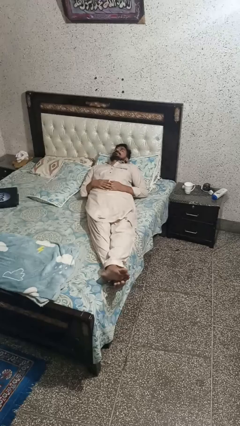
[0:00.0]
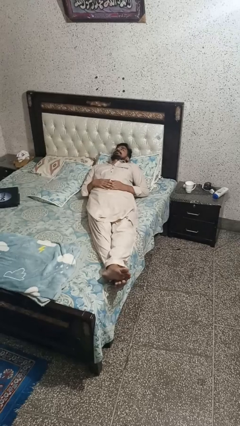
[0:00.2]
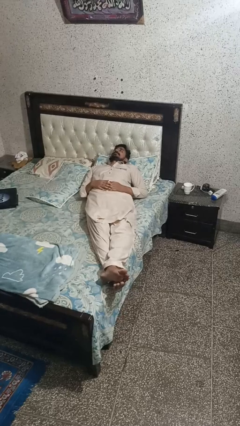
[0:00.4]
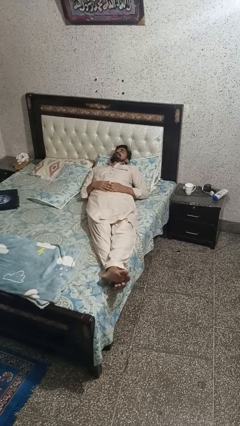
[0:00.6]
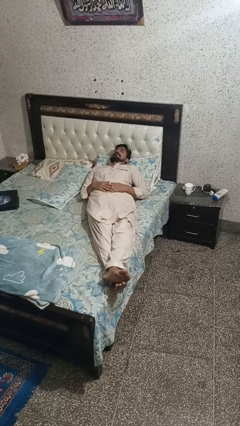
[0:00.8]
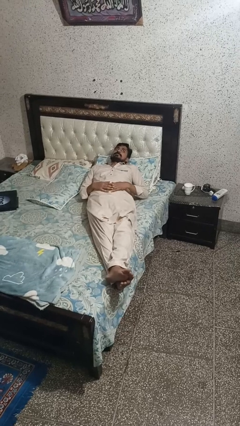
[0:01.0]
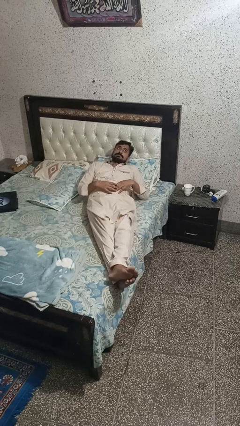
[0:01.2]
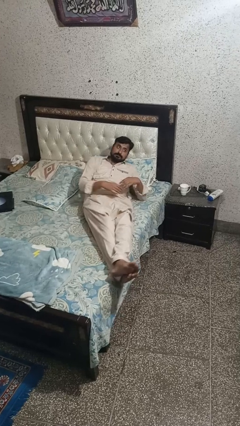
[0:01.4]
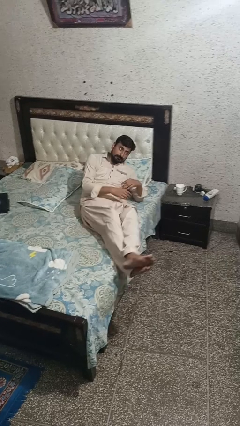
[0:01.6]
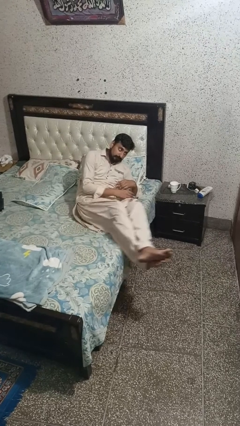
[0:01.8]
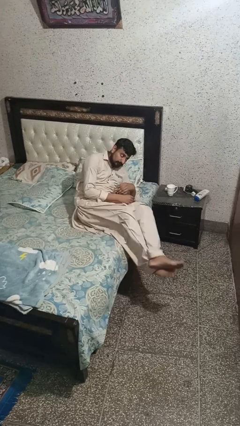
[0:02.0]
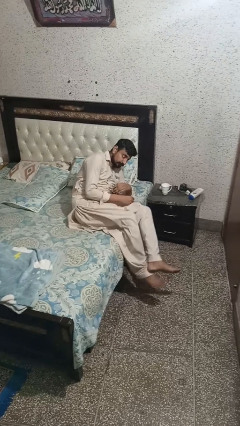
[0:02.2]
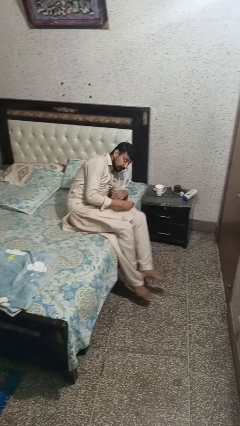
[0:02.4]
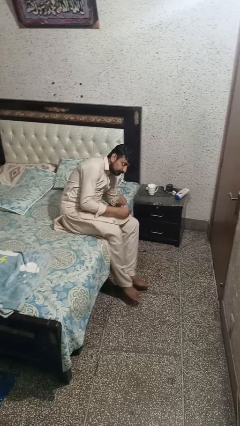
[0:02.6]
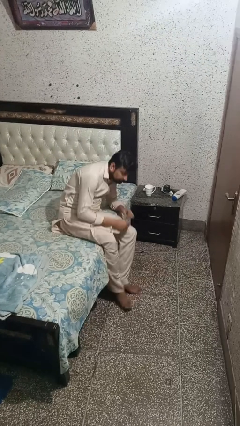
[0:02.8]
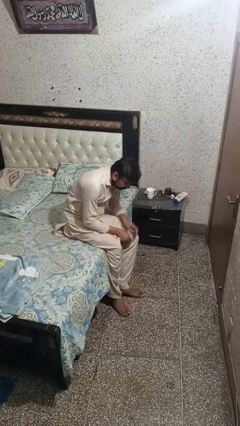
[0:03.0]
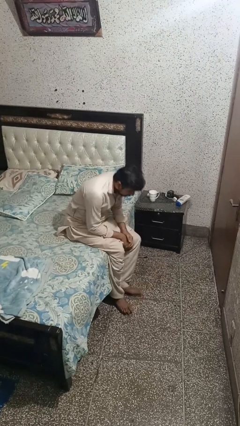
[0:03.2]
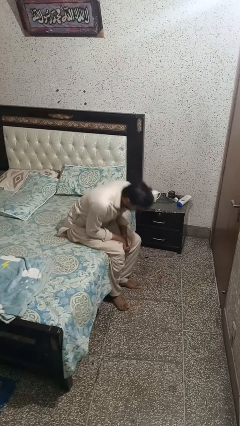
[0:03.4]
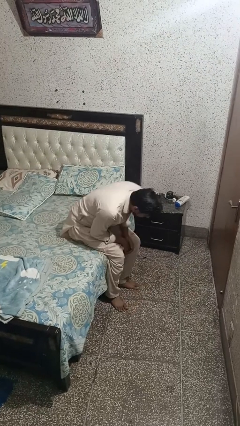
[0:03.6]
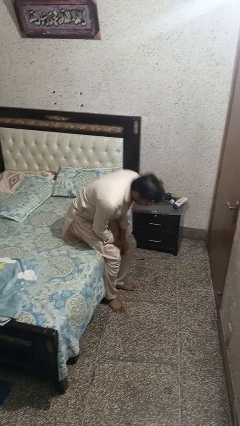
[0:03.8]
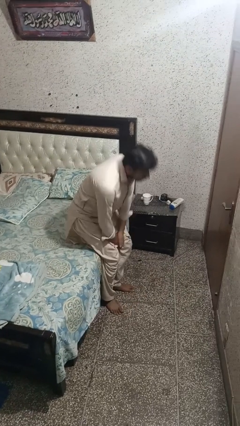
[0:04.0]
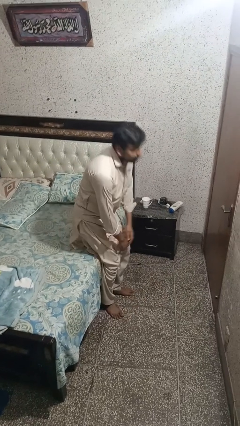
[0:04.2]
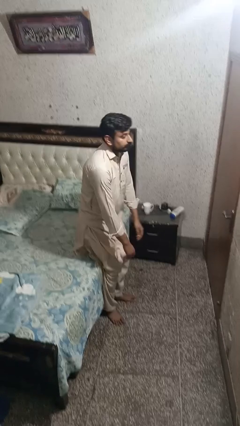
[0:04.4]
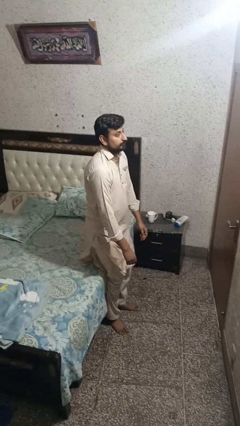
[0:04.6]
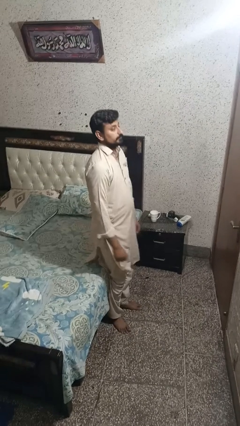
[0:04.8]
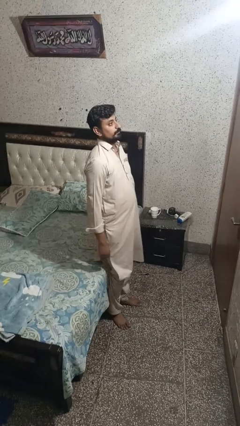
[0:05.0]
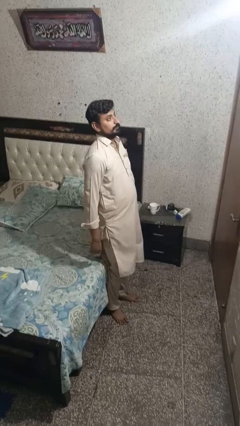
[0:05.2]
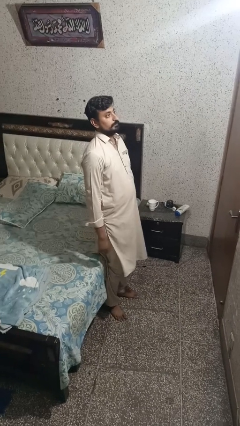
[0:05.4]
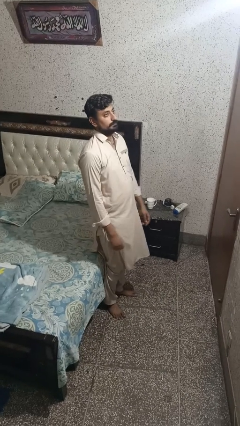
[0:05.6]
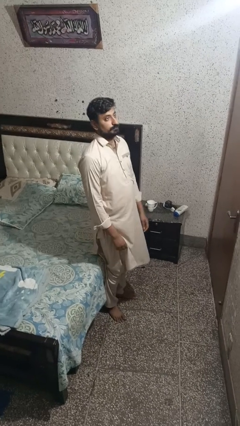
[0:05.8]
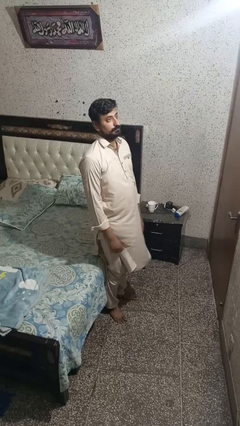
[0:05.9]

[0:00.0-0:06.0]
person stands up

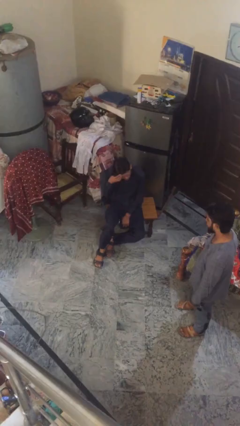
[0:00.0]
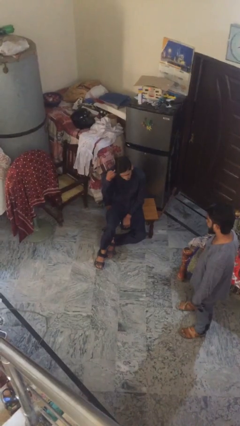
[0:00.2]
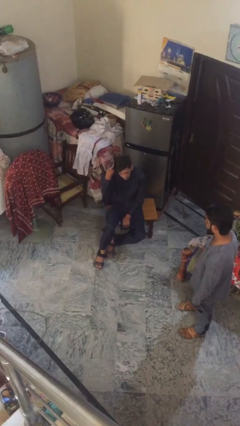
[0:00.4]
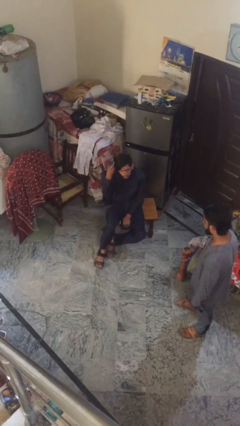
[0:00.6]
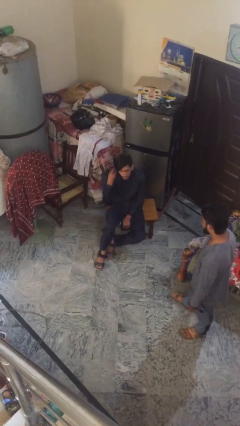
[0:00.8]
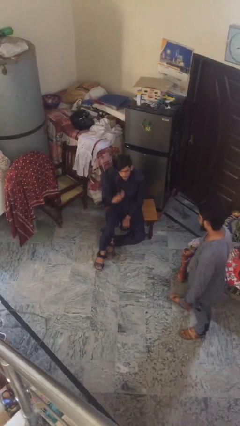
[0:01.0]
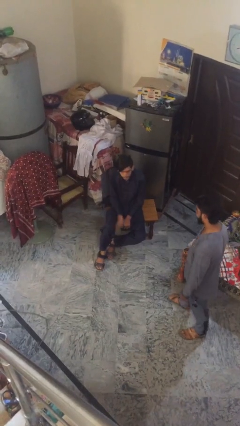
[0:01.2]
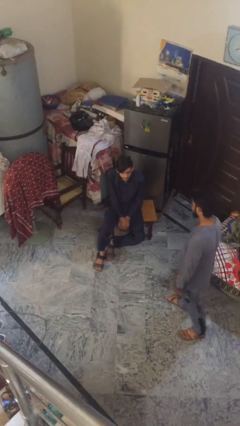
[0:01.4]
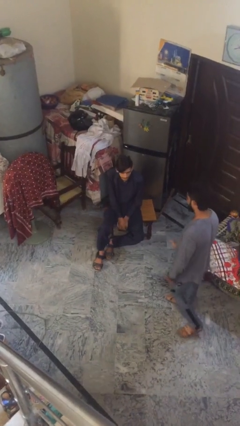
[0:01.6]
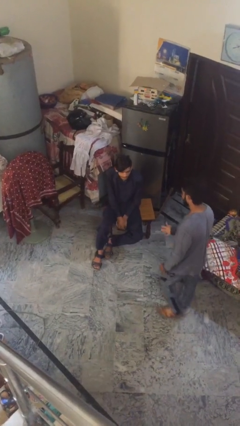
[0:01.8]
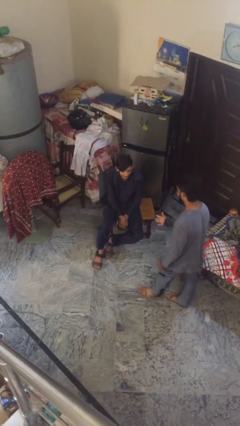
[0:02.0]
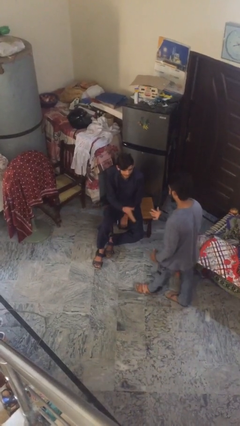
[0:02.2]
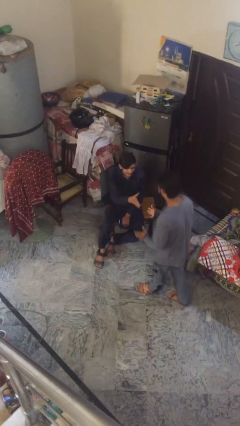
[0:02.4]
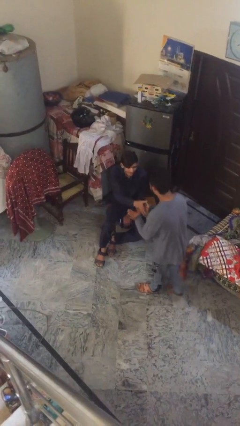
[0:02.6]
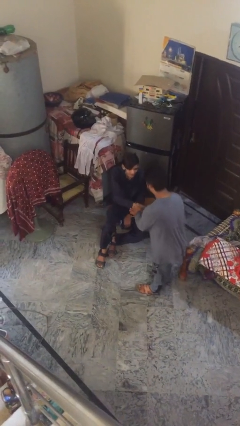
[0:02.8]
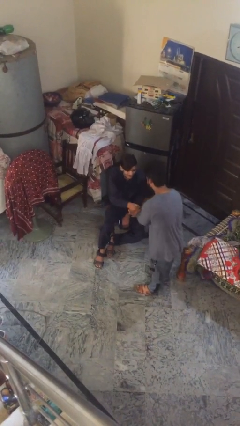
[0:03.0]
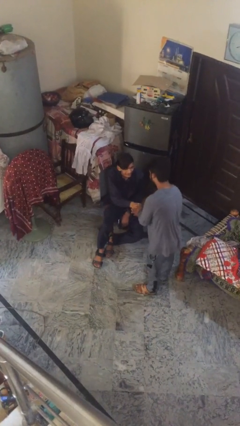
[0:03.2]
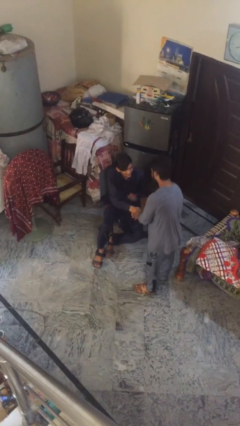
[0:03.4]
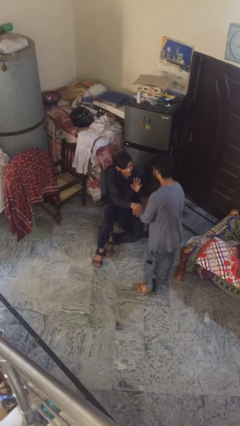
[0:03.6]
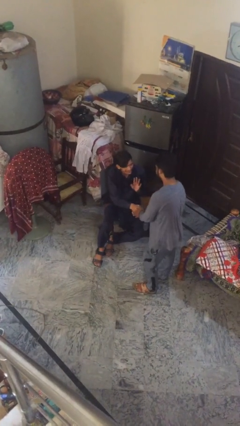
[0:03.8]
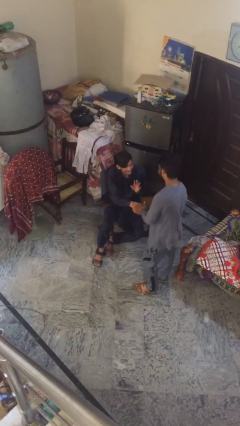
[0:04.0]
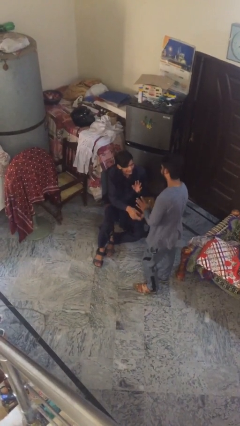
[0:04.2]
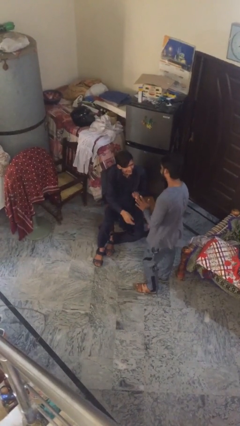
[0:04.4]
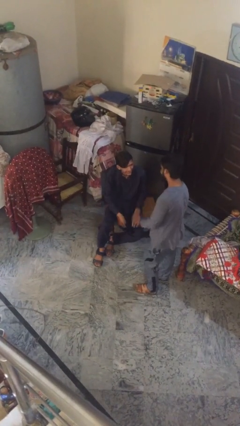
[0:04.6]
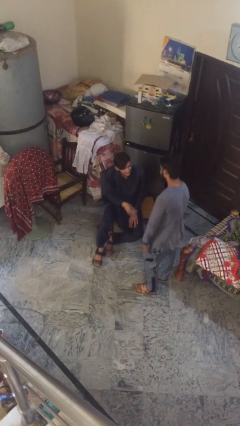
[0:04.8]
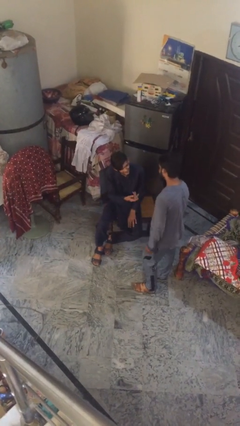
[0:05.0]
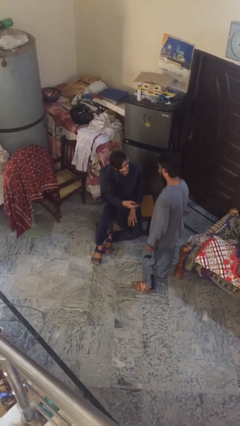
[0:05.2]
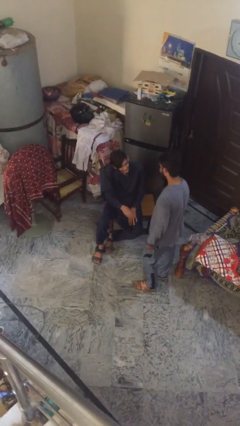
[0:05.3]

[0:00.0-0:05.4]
person shakes hand

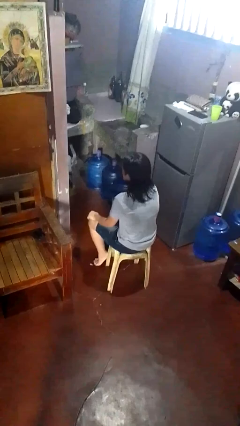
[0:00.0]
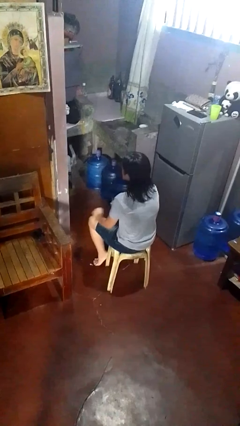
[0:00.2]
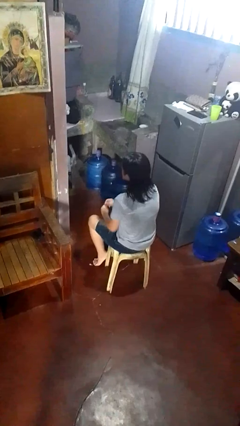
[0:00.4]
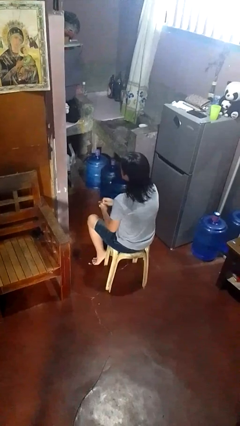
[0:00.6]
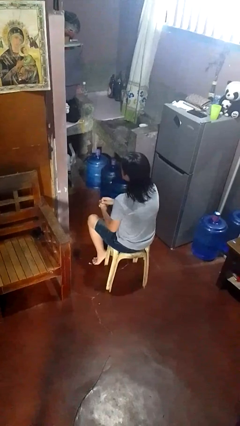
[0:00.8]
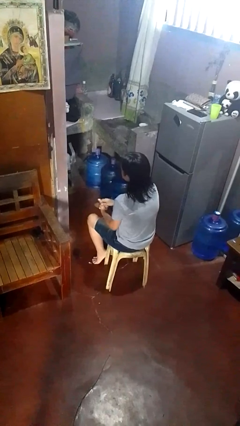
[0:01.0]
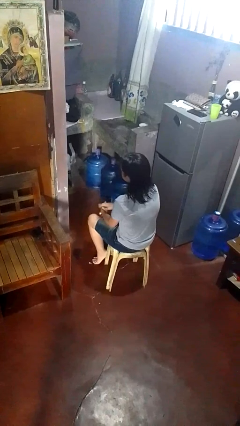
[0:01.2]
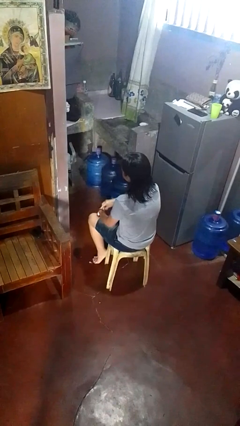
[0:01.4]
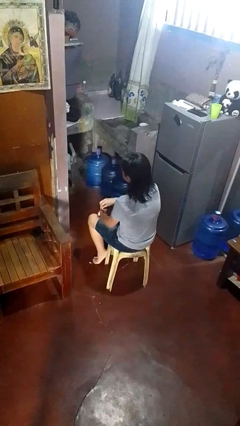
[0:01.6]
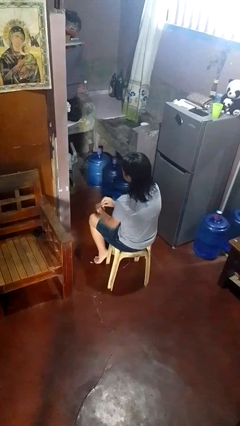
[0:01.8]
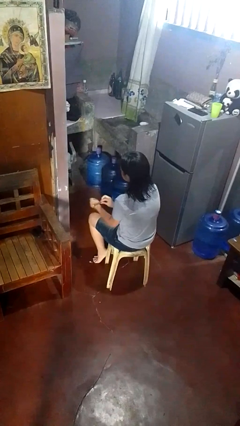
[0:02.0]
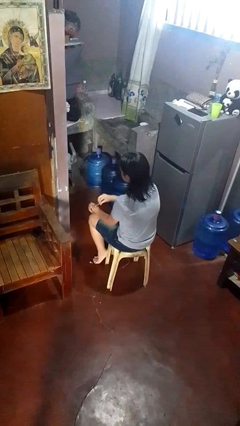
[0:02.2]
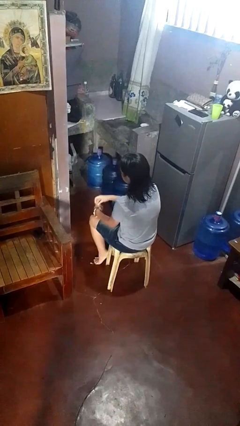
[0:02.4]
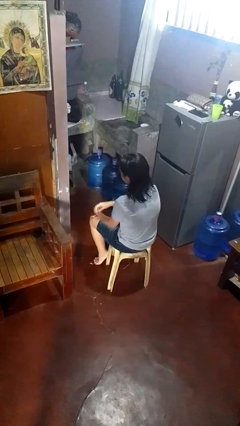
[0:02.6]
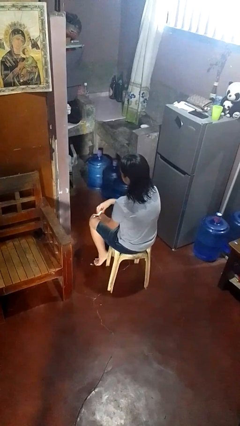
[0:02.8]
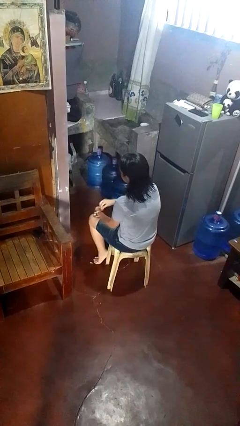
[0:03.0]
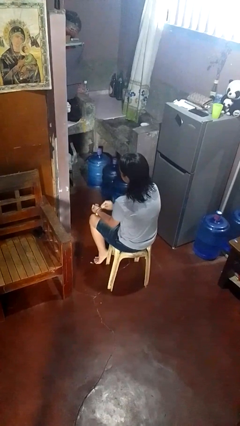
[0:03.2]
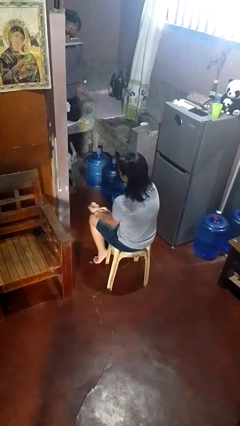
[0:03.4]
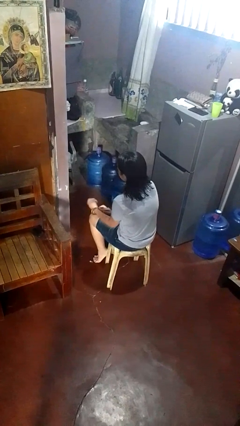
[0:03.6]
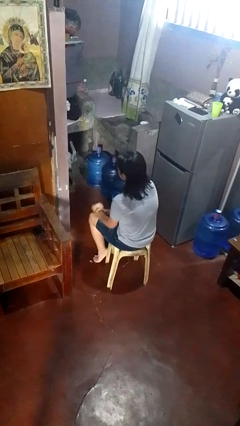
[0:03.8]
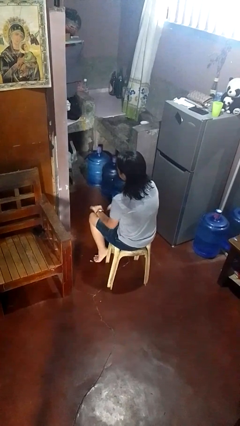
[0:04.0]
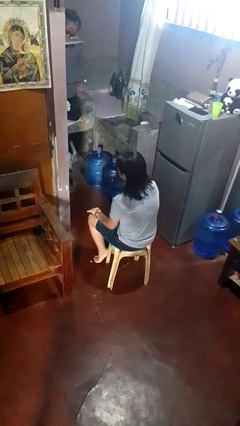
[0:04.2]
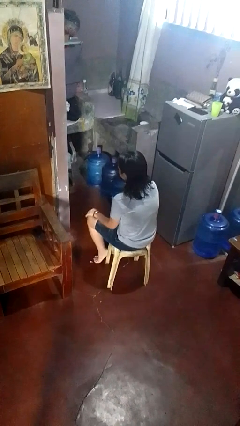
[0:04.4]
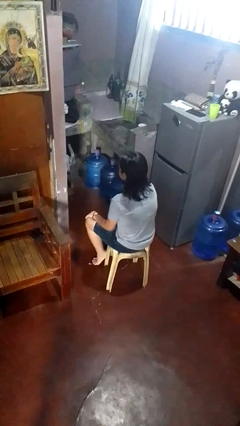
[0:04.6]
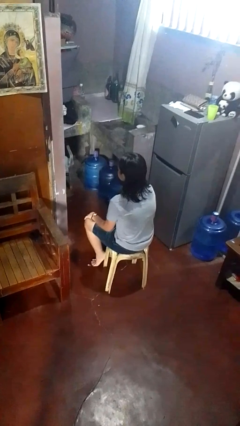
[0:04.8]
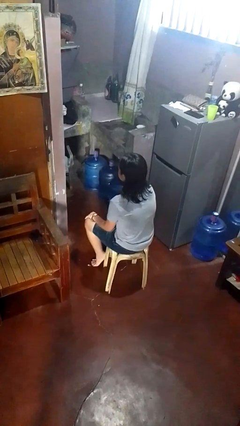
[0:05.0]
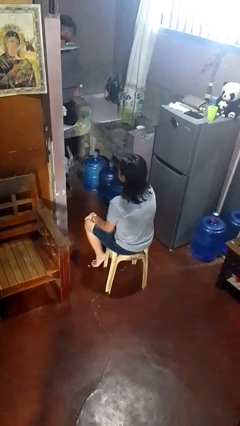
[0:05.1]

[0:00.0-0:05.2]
person puts on wristwatch

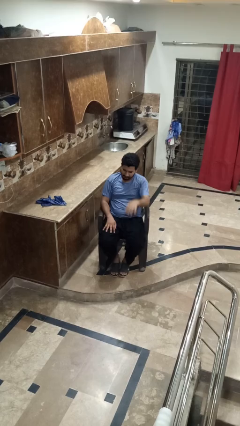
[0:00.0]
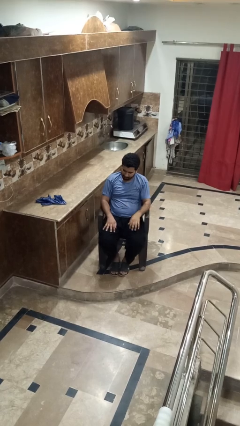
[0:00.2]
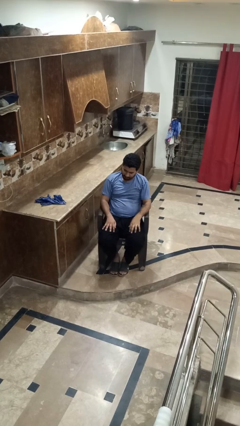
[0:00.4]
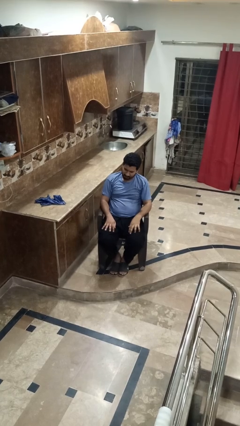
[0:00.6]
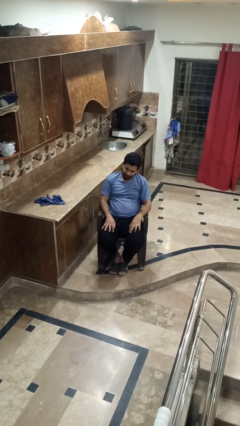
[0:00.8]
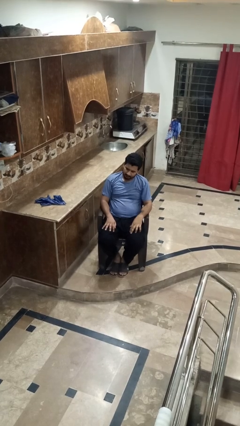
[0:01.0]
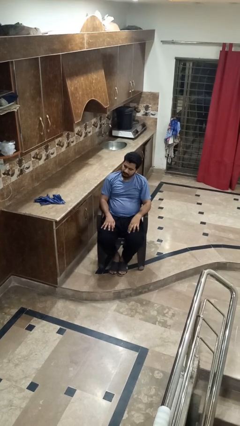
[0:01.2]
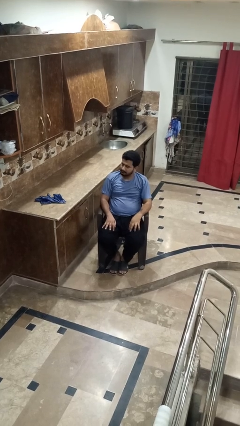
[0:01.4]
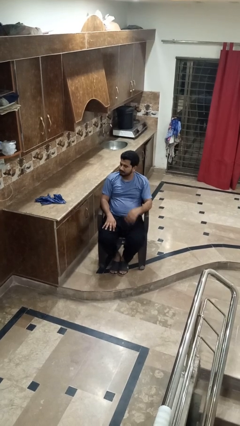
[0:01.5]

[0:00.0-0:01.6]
person gestures lower hand
